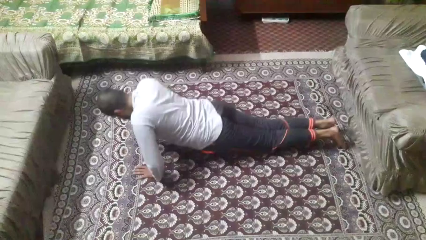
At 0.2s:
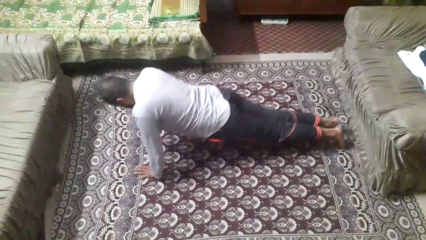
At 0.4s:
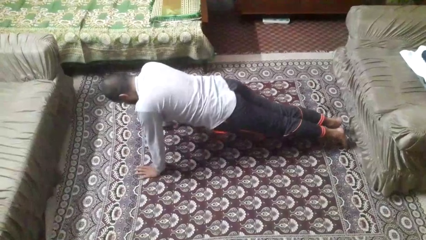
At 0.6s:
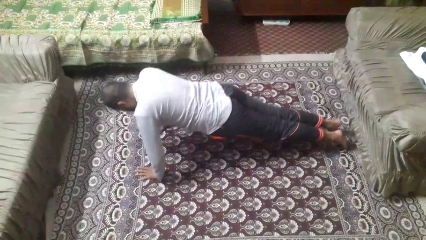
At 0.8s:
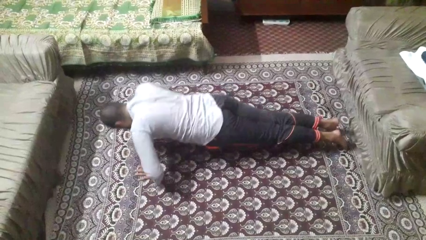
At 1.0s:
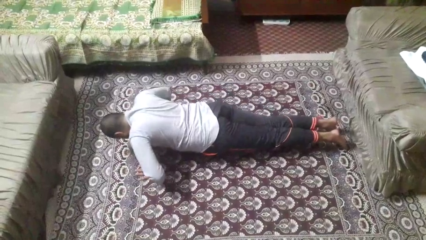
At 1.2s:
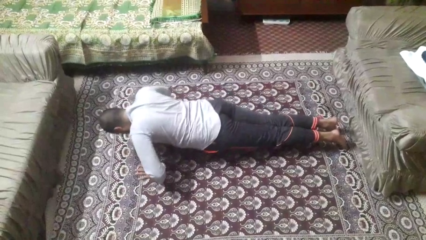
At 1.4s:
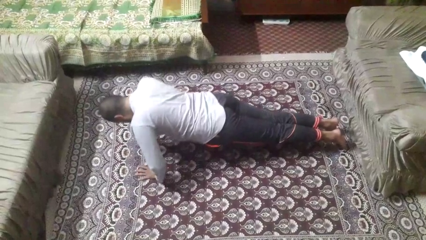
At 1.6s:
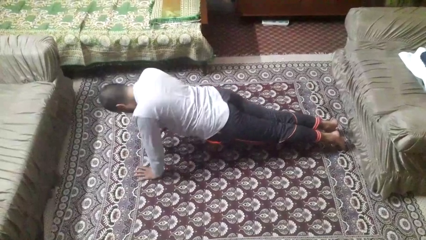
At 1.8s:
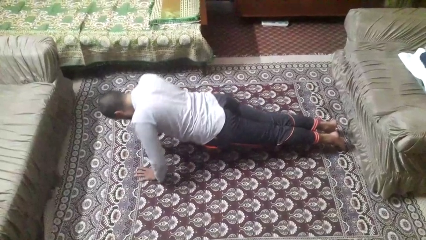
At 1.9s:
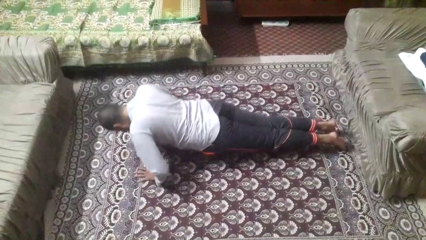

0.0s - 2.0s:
person exercises with pushup

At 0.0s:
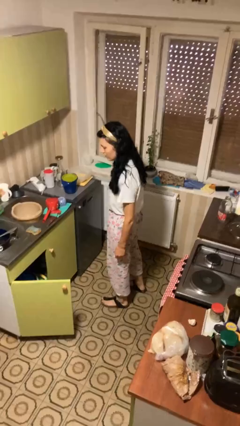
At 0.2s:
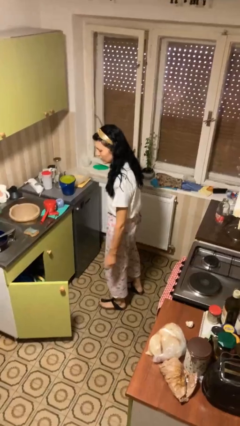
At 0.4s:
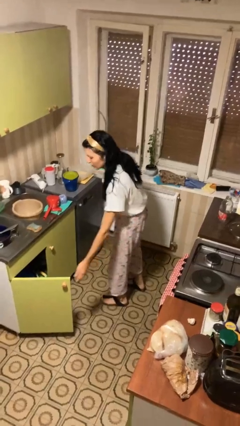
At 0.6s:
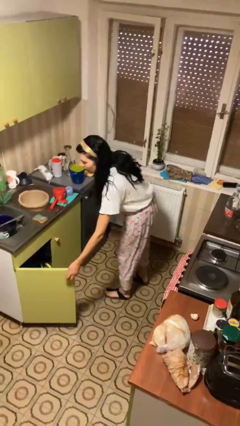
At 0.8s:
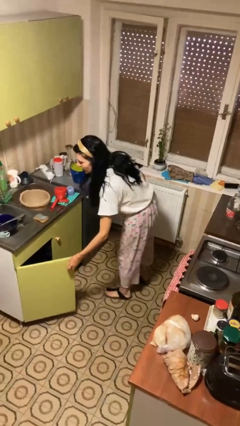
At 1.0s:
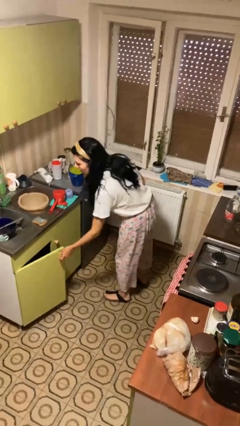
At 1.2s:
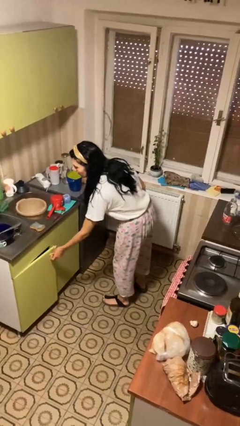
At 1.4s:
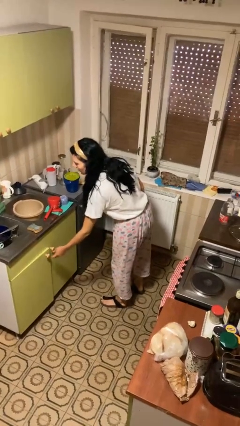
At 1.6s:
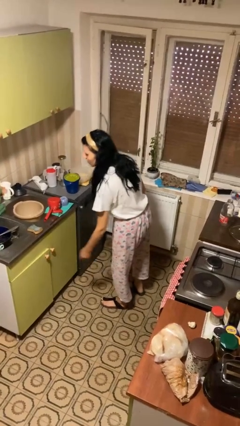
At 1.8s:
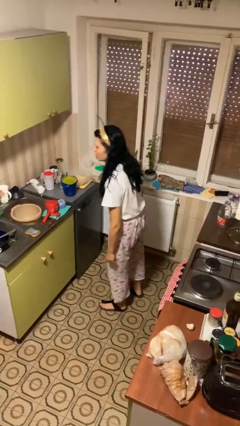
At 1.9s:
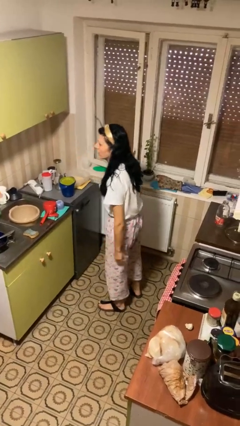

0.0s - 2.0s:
person closes cabinet

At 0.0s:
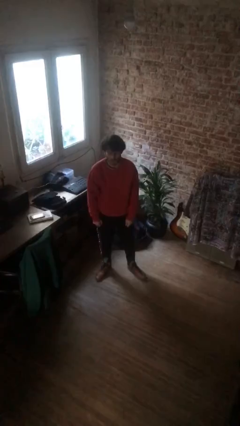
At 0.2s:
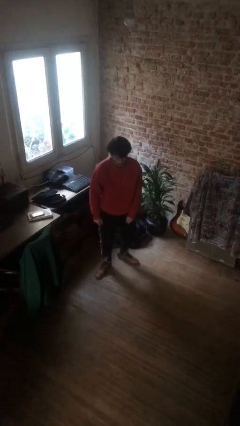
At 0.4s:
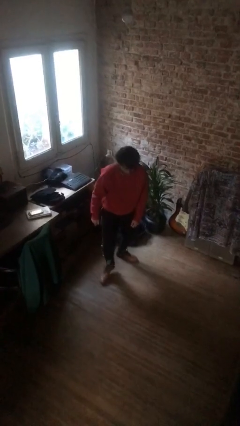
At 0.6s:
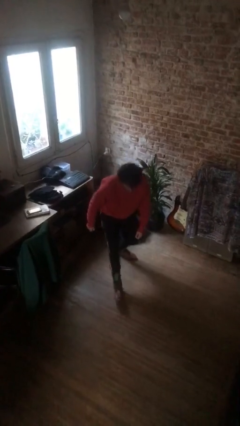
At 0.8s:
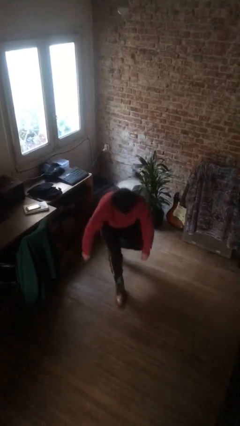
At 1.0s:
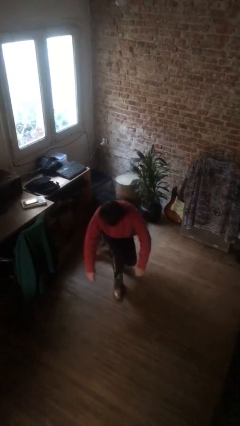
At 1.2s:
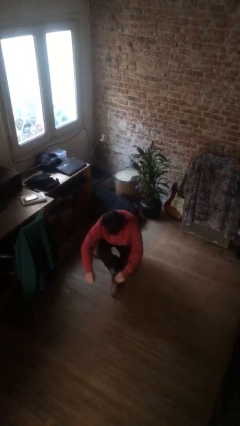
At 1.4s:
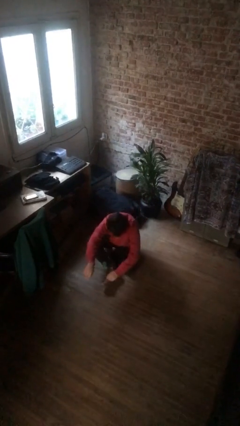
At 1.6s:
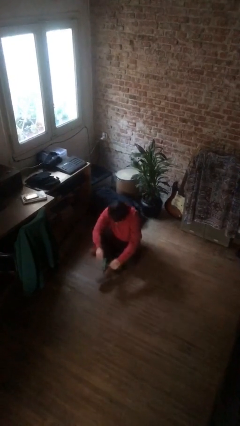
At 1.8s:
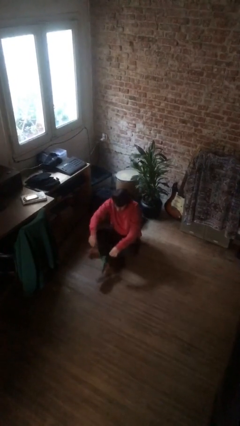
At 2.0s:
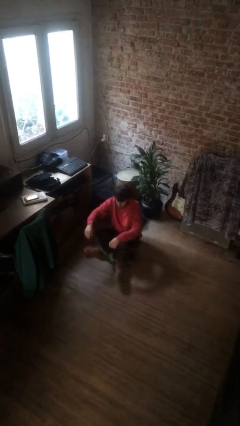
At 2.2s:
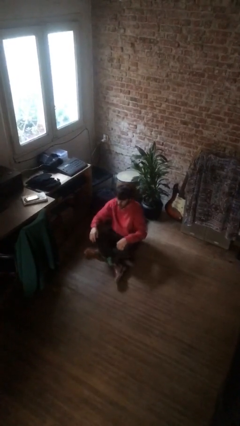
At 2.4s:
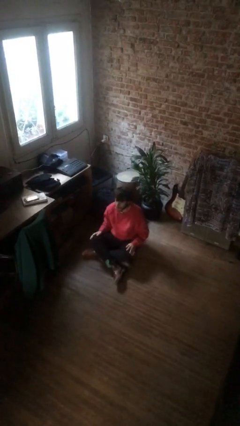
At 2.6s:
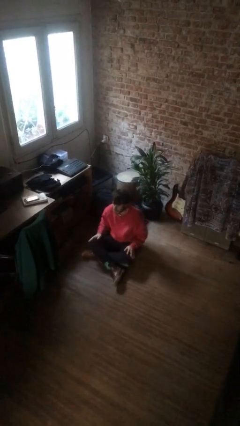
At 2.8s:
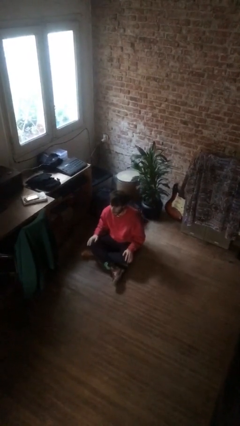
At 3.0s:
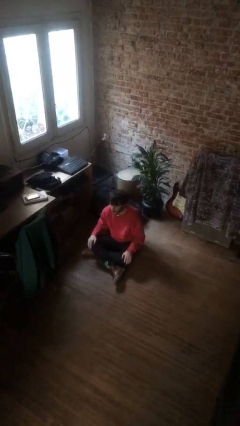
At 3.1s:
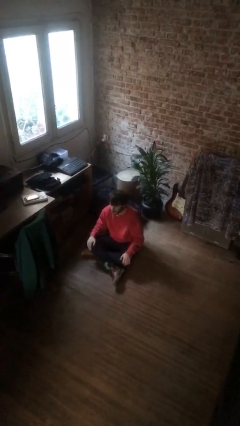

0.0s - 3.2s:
person sits crisscross

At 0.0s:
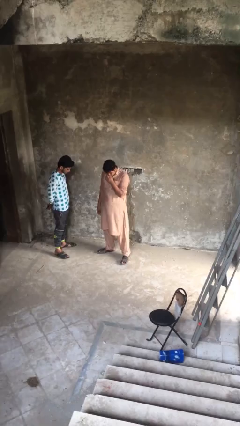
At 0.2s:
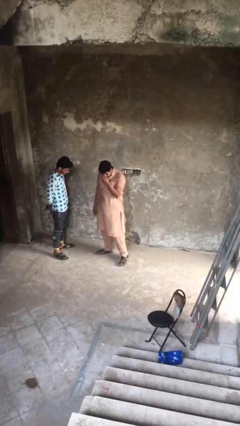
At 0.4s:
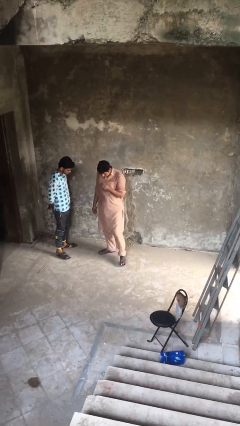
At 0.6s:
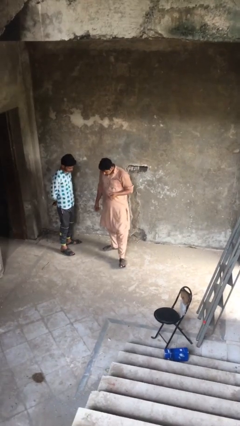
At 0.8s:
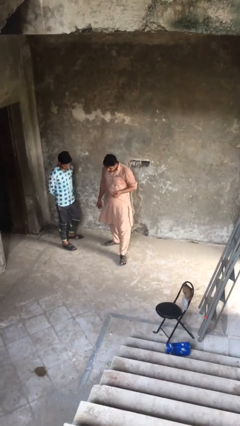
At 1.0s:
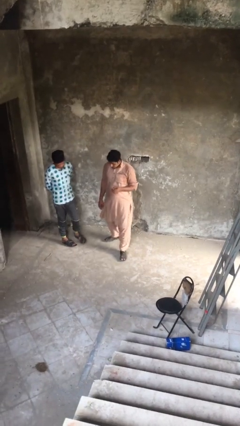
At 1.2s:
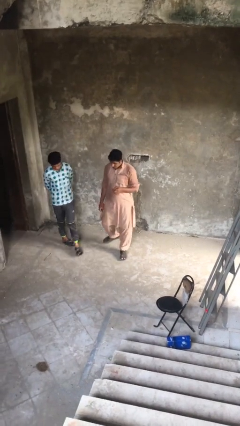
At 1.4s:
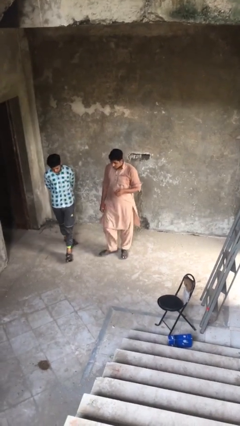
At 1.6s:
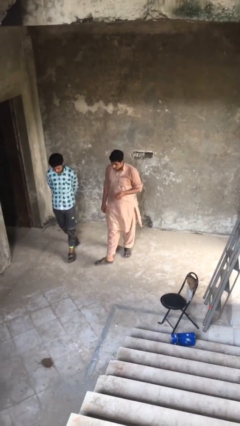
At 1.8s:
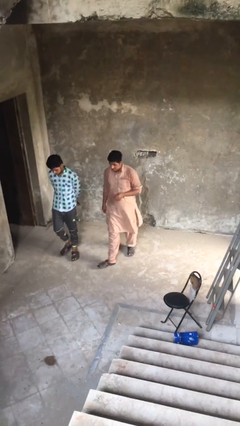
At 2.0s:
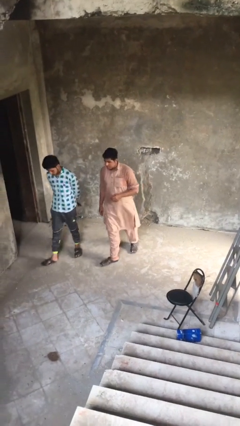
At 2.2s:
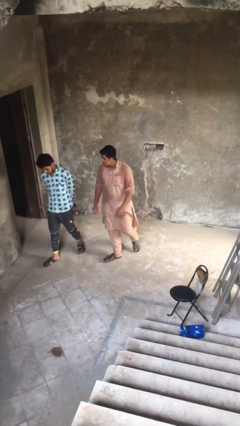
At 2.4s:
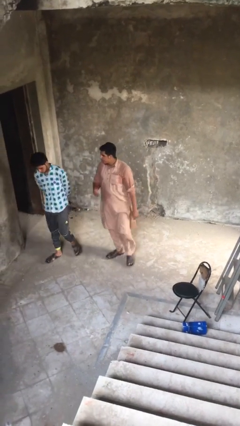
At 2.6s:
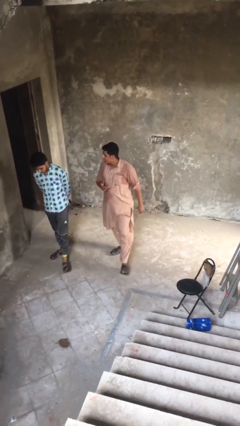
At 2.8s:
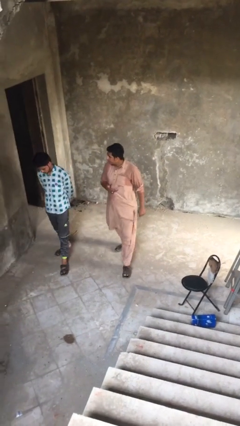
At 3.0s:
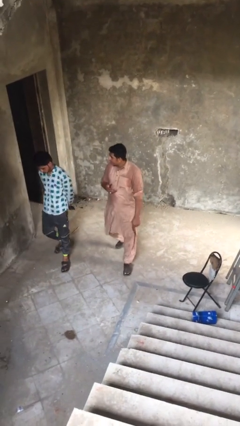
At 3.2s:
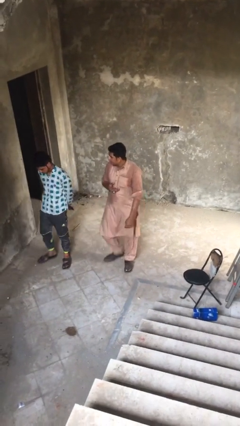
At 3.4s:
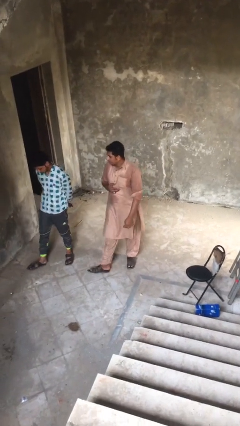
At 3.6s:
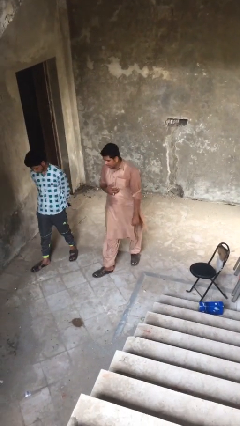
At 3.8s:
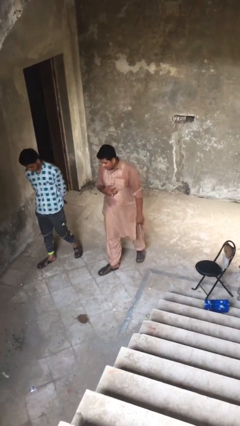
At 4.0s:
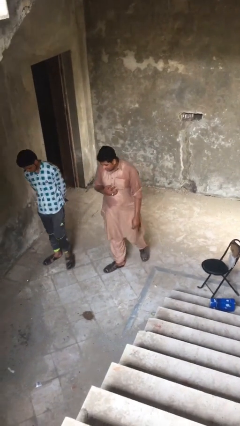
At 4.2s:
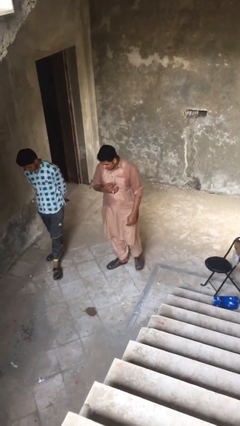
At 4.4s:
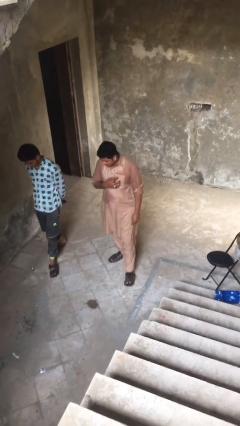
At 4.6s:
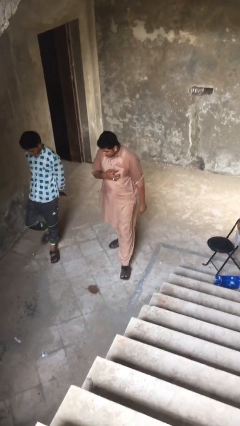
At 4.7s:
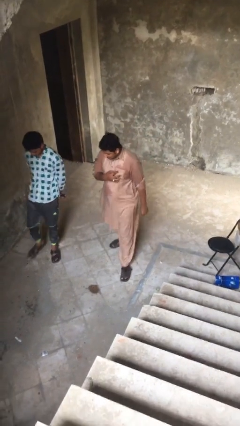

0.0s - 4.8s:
person talks to person

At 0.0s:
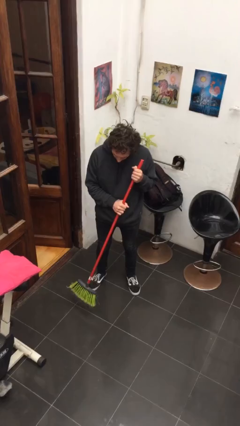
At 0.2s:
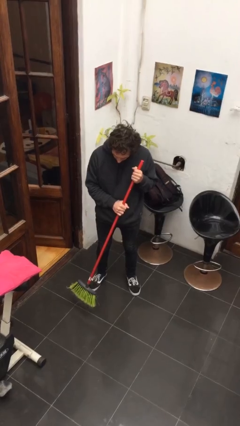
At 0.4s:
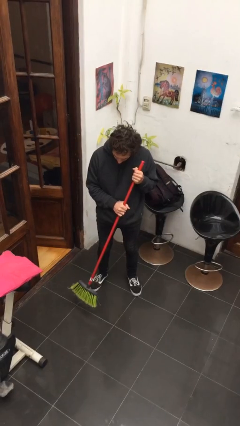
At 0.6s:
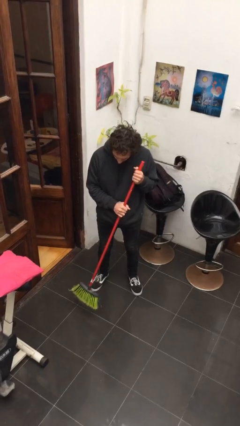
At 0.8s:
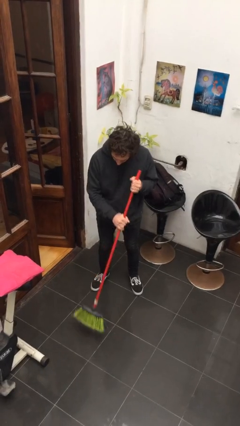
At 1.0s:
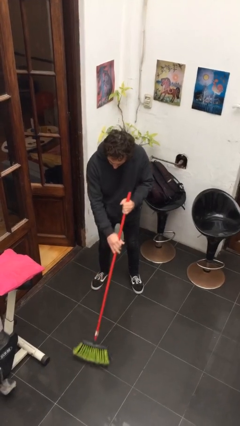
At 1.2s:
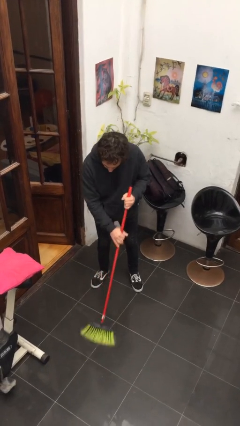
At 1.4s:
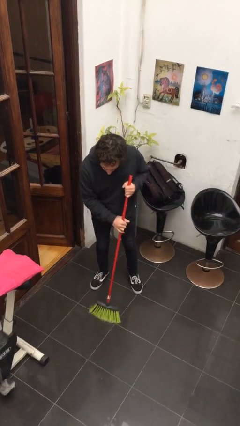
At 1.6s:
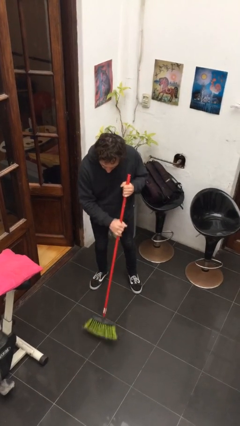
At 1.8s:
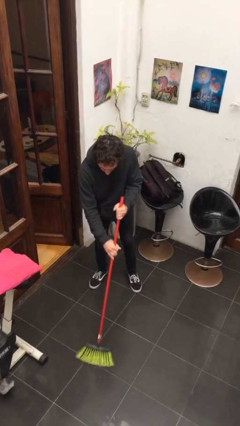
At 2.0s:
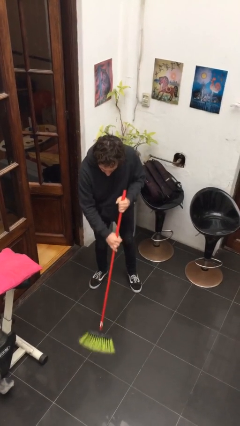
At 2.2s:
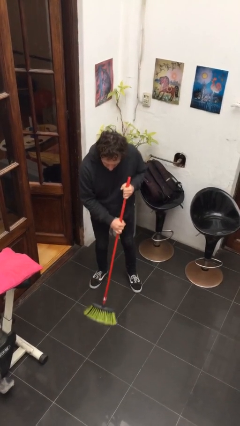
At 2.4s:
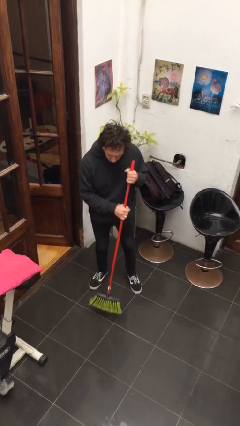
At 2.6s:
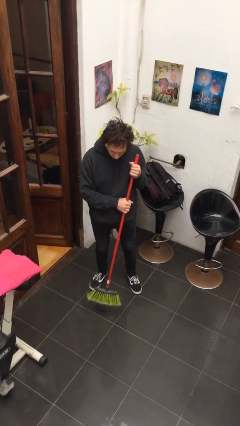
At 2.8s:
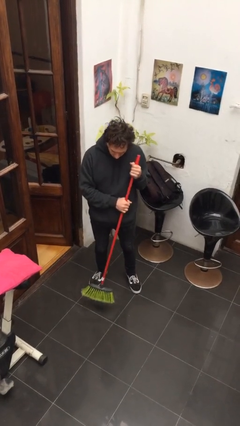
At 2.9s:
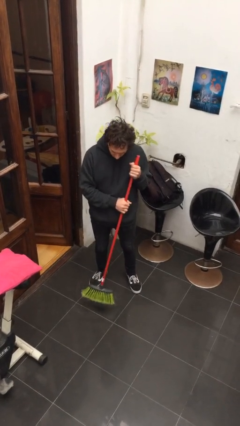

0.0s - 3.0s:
person sweeps floor

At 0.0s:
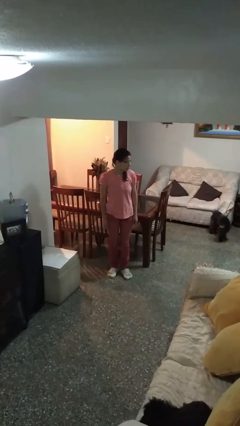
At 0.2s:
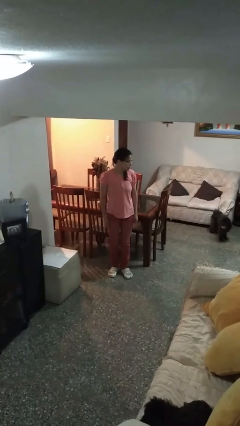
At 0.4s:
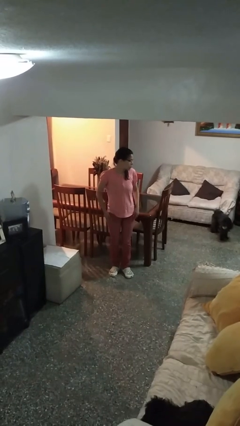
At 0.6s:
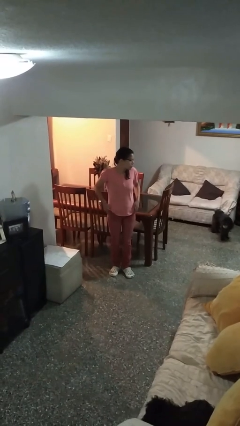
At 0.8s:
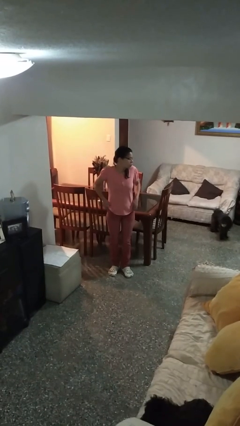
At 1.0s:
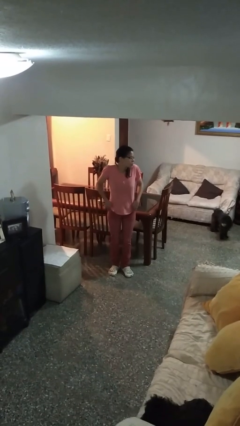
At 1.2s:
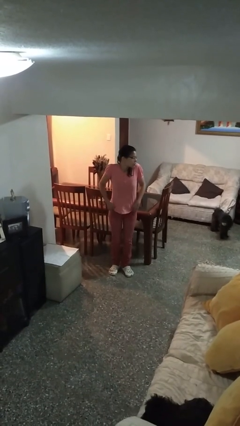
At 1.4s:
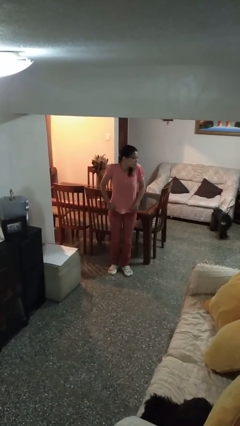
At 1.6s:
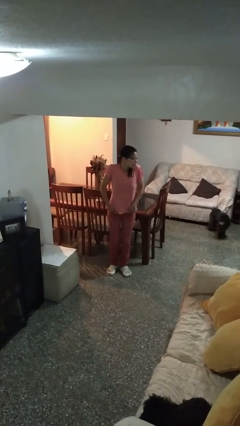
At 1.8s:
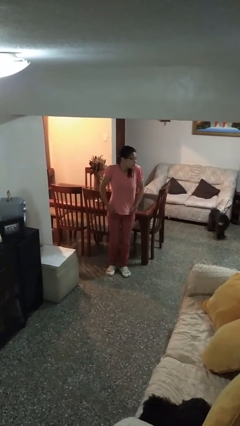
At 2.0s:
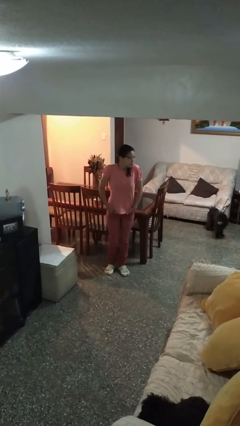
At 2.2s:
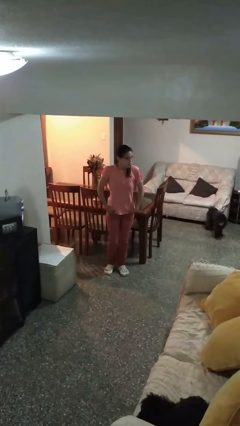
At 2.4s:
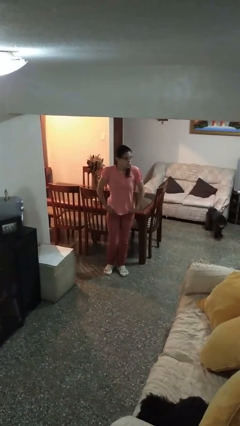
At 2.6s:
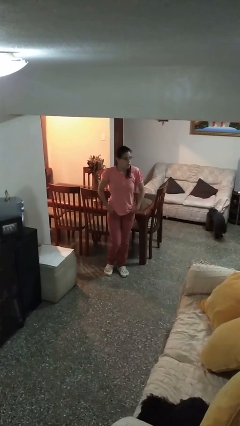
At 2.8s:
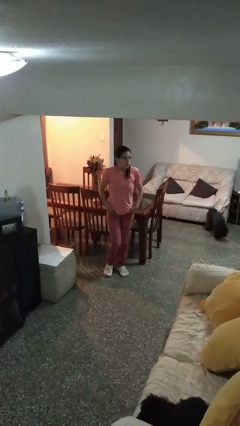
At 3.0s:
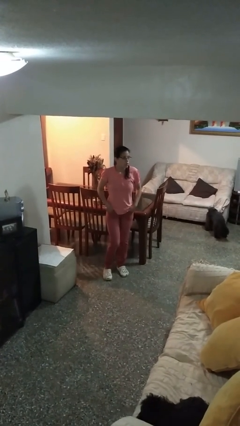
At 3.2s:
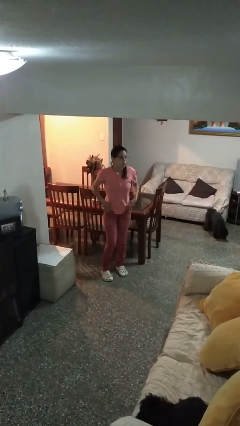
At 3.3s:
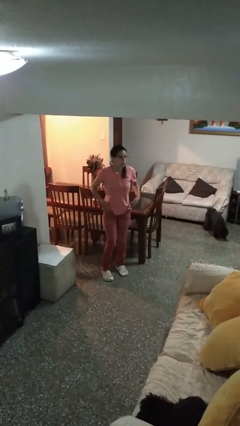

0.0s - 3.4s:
person puts hands in back pockets
